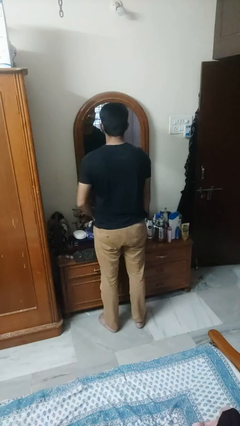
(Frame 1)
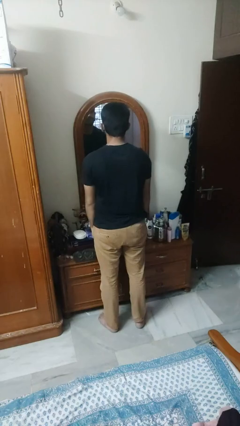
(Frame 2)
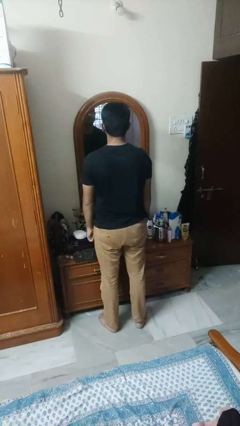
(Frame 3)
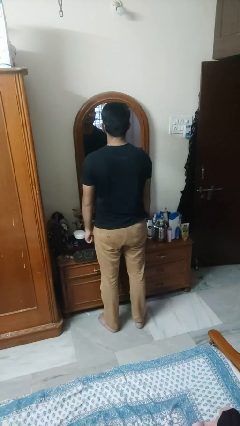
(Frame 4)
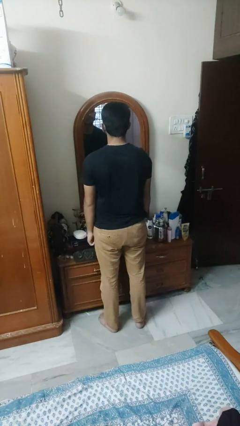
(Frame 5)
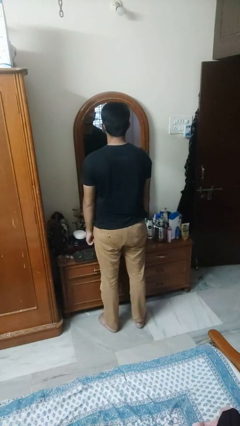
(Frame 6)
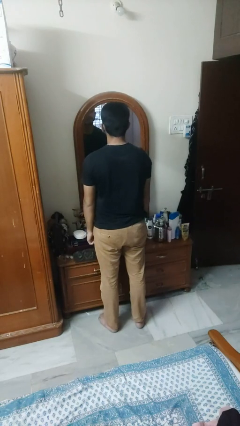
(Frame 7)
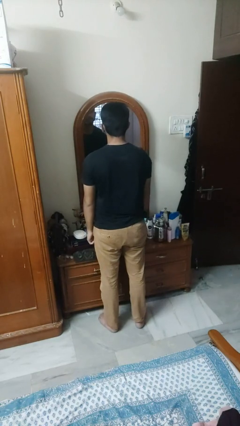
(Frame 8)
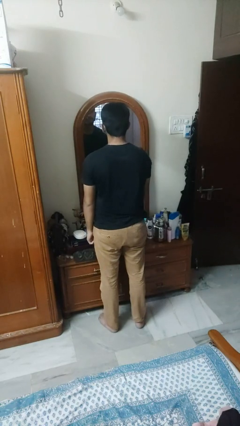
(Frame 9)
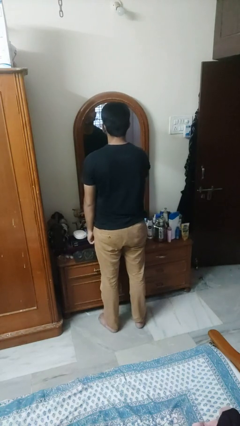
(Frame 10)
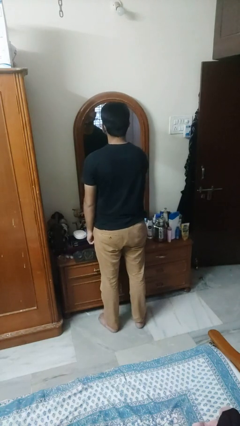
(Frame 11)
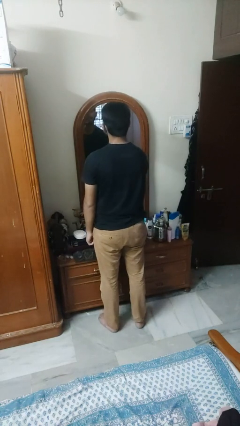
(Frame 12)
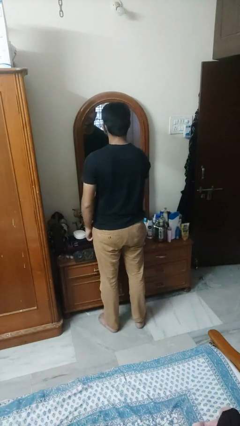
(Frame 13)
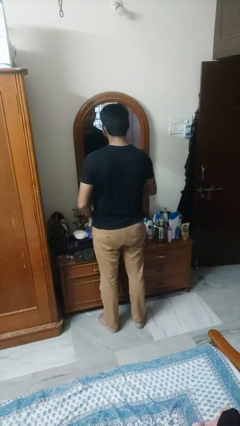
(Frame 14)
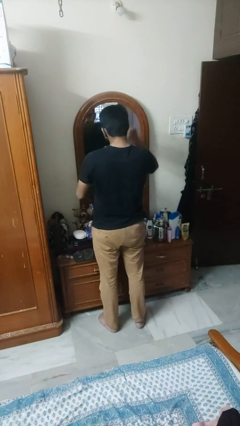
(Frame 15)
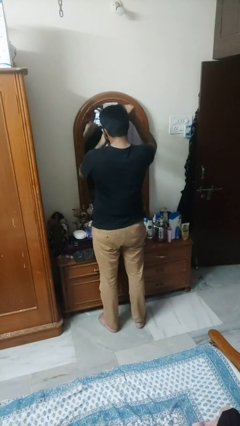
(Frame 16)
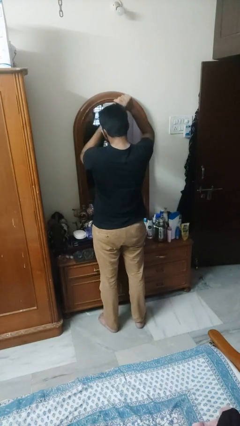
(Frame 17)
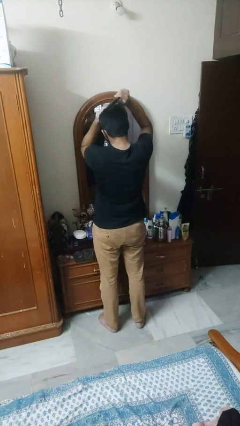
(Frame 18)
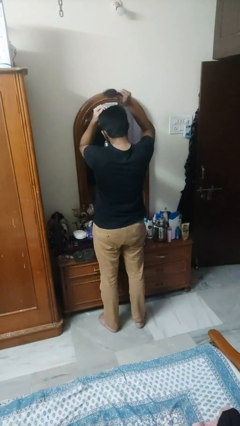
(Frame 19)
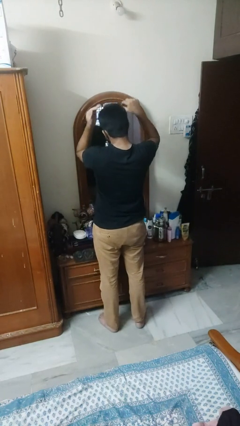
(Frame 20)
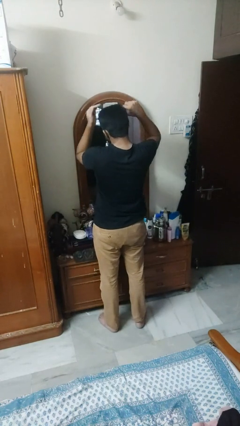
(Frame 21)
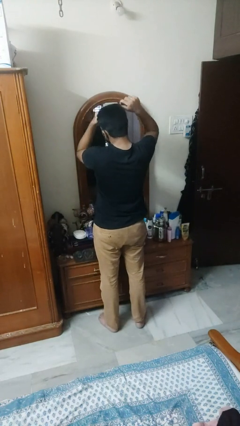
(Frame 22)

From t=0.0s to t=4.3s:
person brushes hair

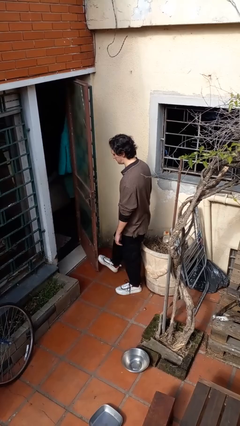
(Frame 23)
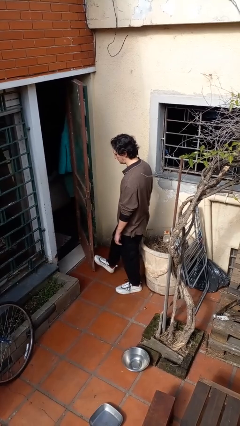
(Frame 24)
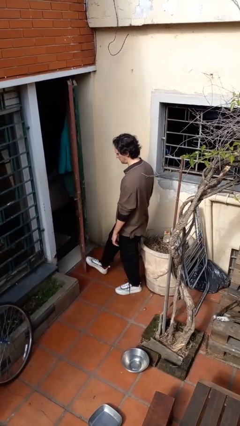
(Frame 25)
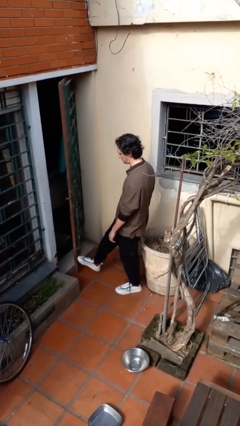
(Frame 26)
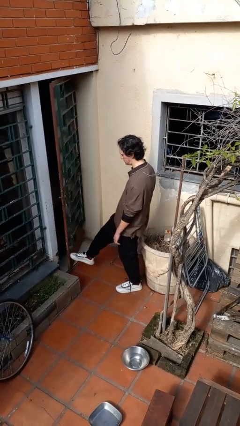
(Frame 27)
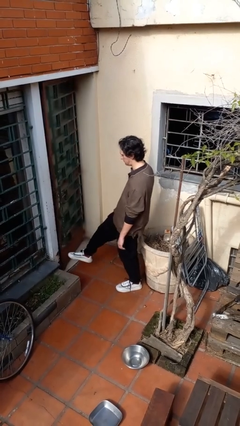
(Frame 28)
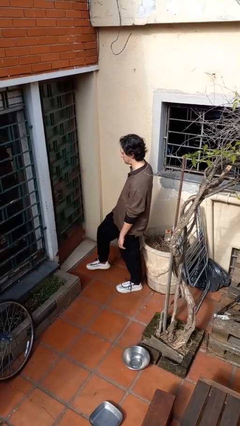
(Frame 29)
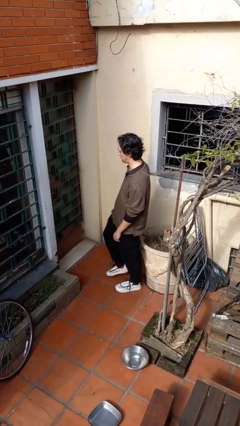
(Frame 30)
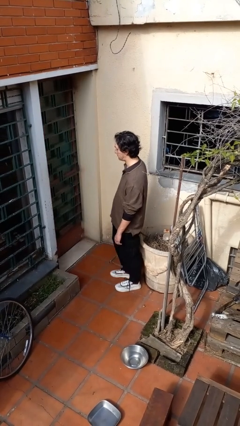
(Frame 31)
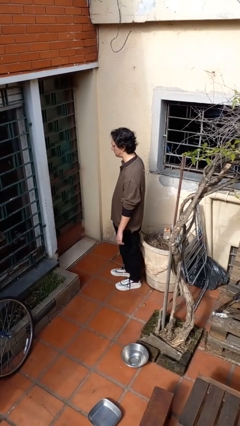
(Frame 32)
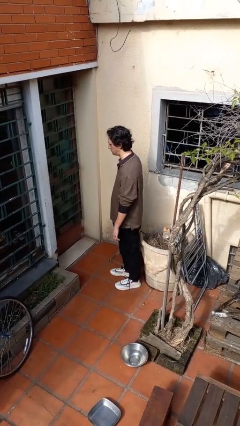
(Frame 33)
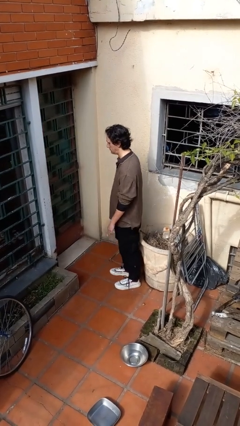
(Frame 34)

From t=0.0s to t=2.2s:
person closes door with foot

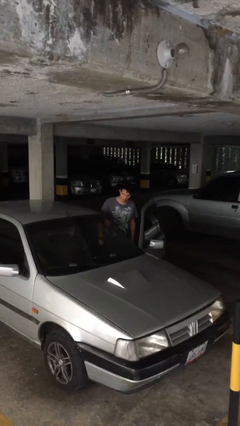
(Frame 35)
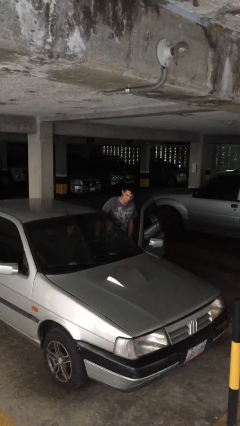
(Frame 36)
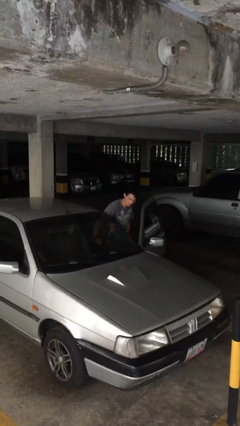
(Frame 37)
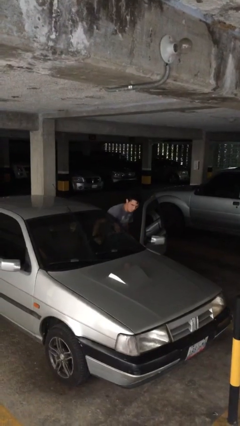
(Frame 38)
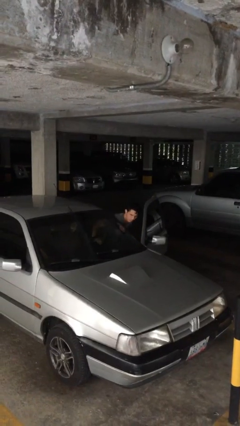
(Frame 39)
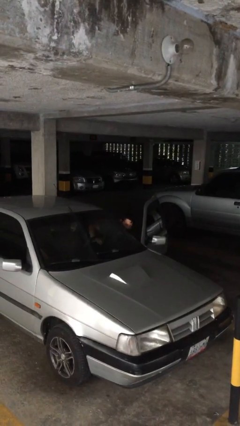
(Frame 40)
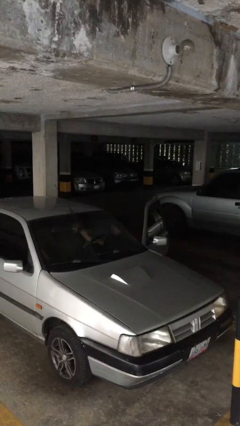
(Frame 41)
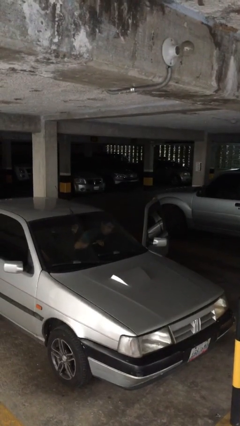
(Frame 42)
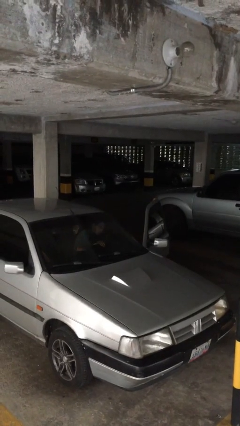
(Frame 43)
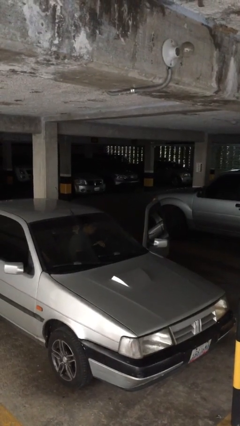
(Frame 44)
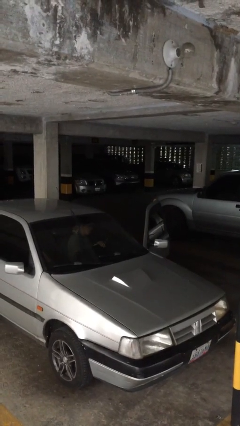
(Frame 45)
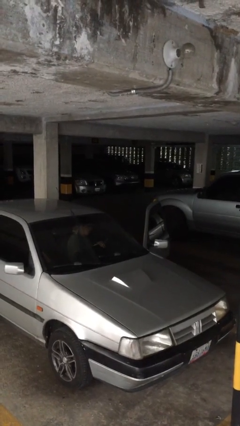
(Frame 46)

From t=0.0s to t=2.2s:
person enters car

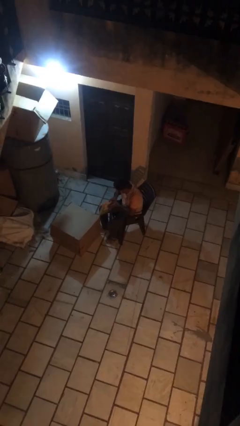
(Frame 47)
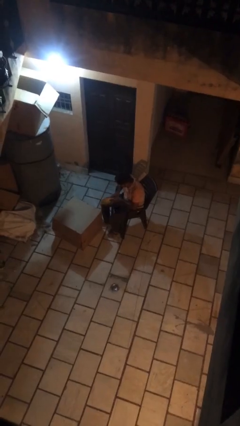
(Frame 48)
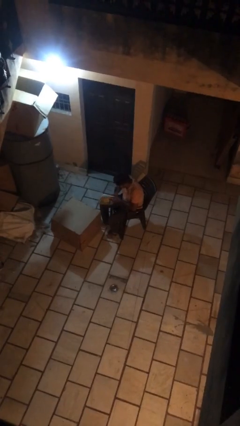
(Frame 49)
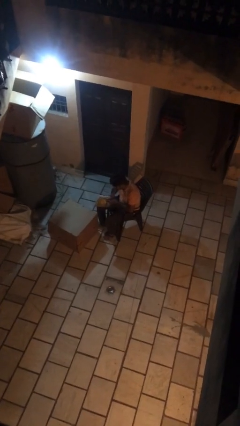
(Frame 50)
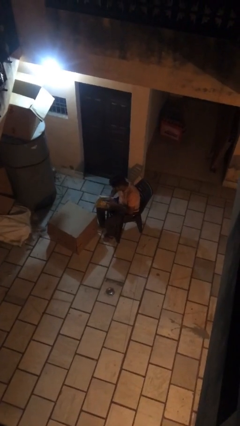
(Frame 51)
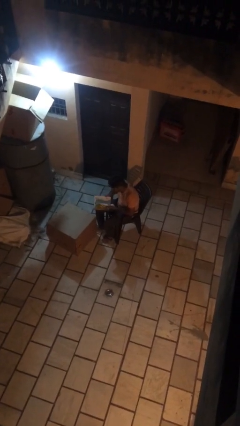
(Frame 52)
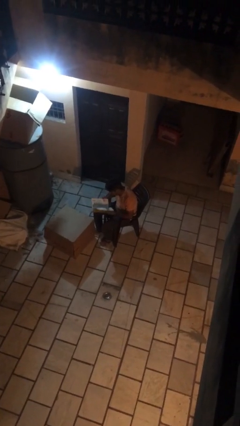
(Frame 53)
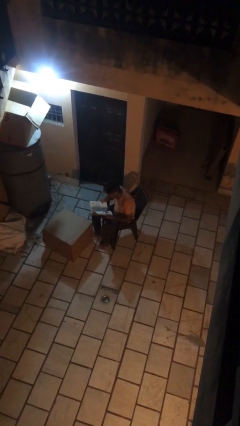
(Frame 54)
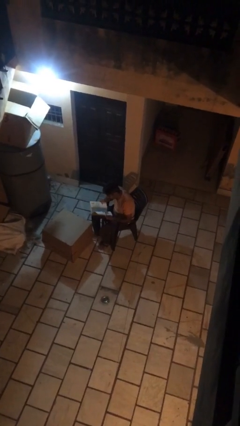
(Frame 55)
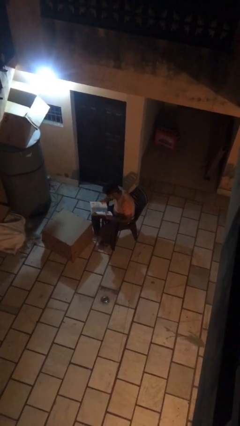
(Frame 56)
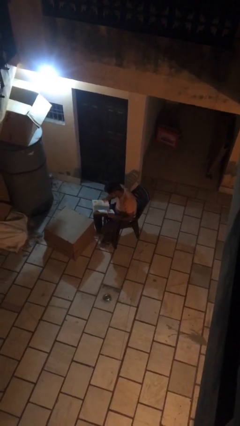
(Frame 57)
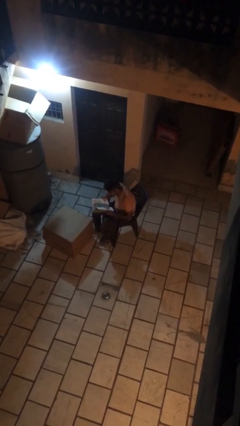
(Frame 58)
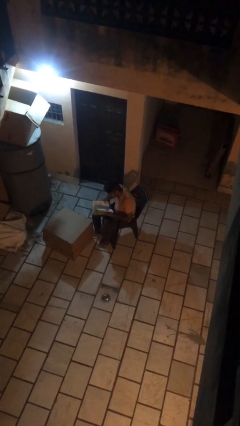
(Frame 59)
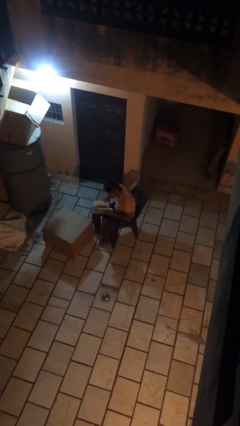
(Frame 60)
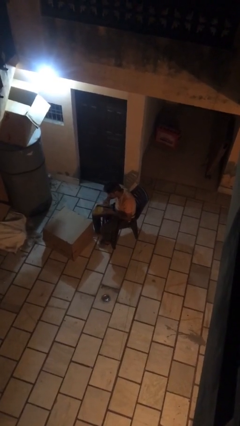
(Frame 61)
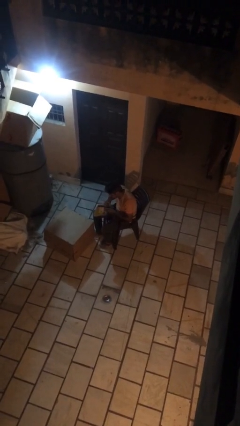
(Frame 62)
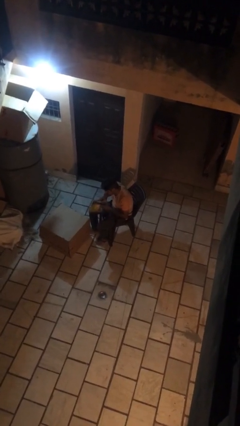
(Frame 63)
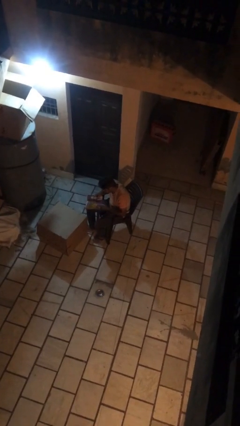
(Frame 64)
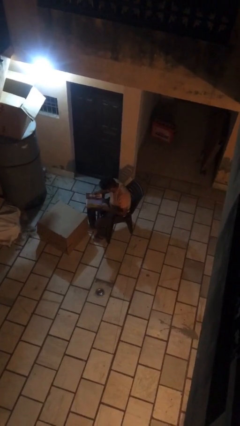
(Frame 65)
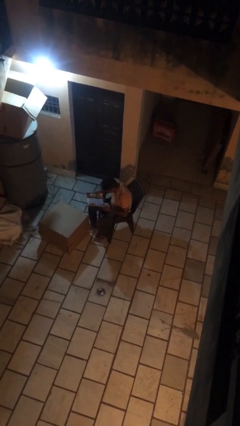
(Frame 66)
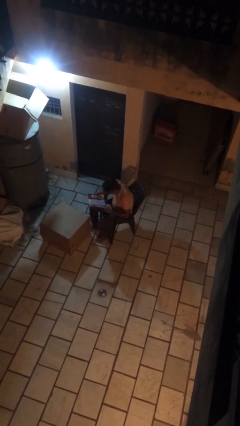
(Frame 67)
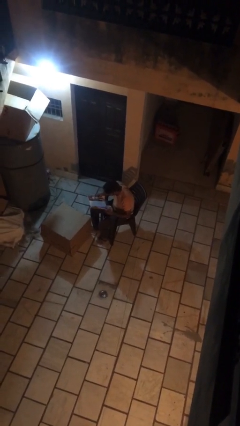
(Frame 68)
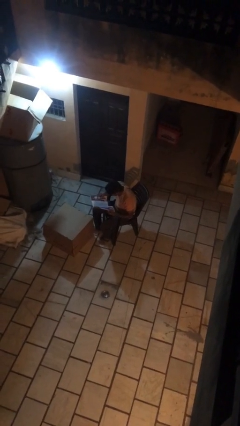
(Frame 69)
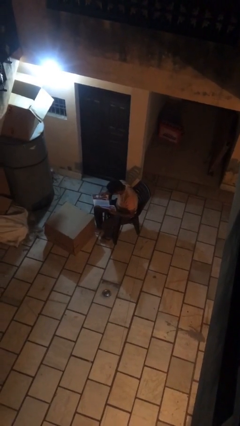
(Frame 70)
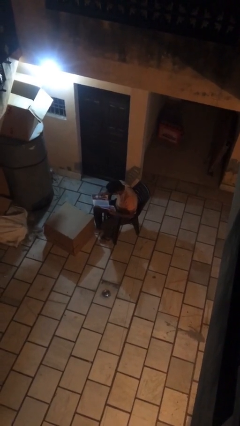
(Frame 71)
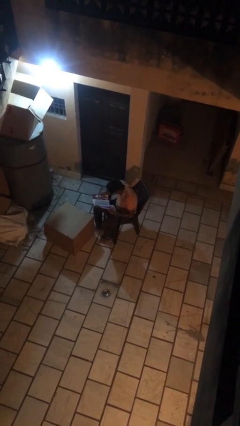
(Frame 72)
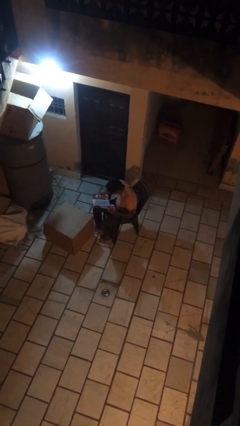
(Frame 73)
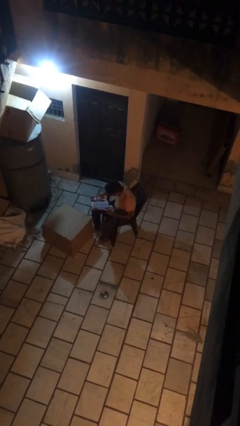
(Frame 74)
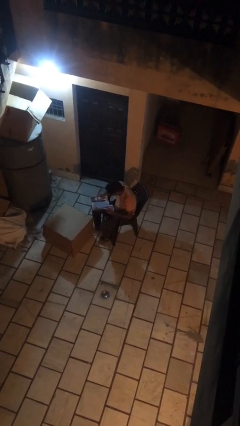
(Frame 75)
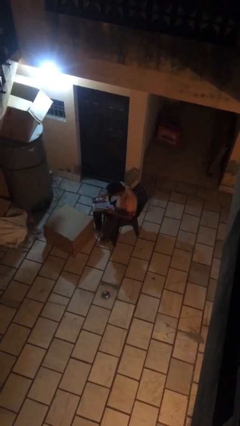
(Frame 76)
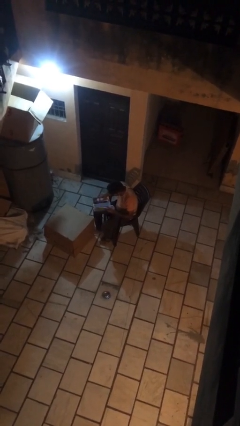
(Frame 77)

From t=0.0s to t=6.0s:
person reads document

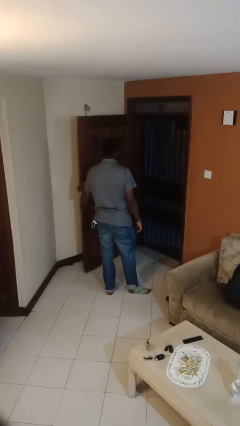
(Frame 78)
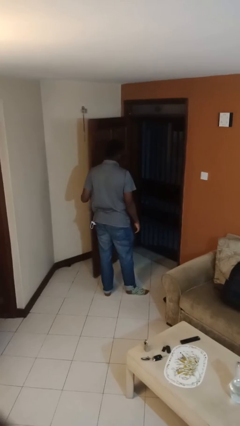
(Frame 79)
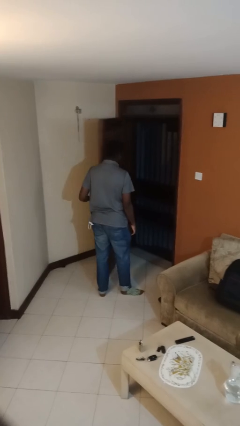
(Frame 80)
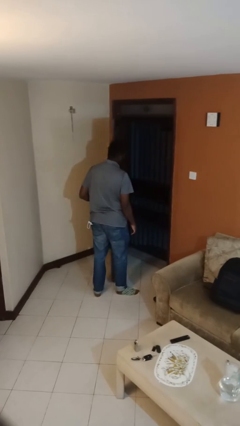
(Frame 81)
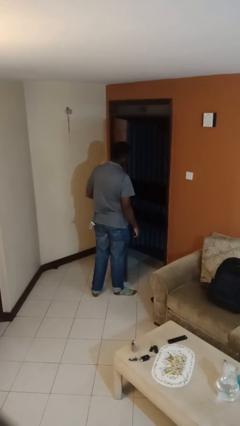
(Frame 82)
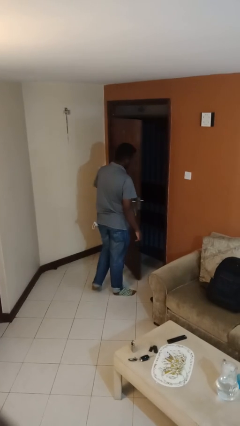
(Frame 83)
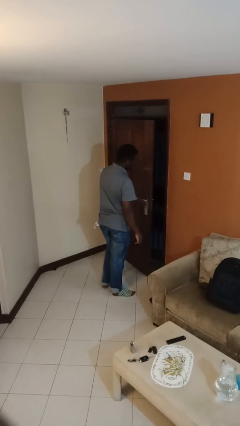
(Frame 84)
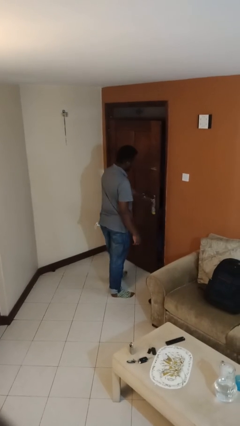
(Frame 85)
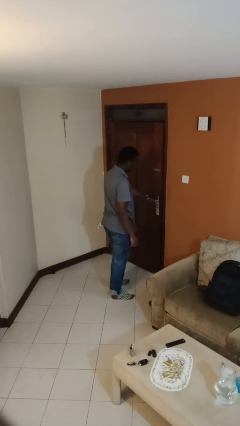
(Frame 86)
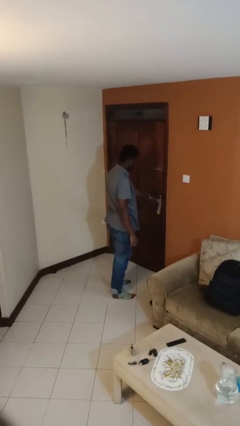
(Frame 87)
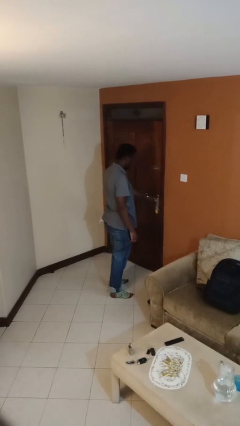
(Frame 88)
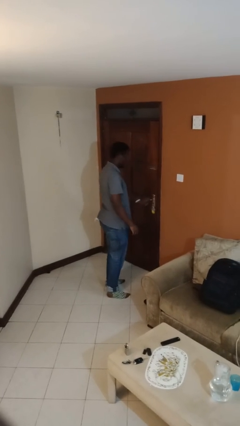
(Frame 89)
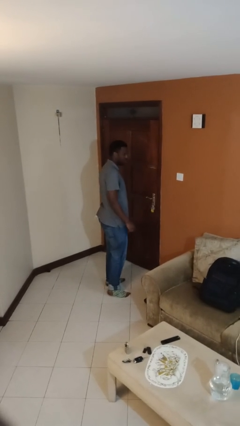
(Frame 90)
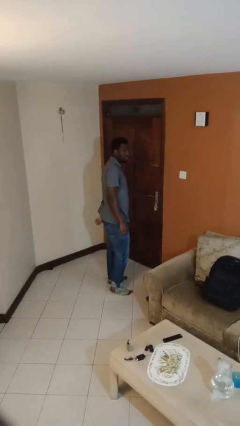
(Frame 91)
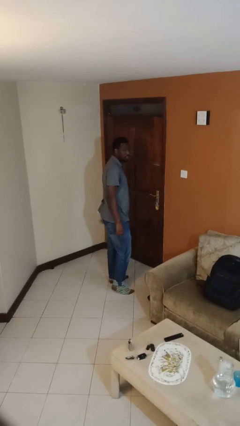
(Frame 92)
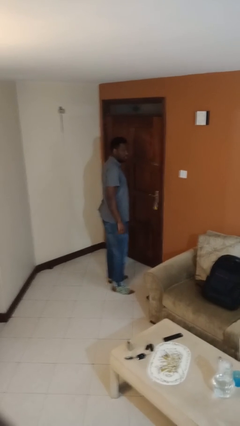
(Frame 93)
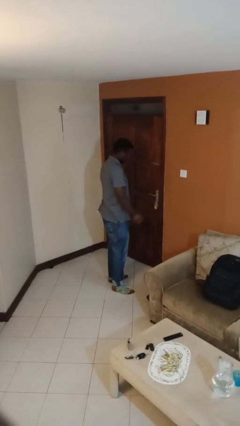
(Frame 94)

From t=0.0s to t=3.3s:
person closes facility door
